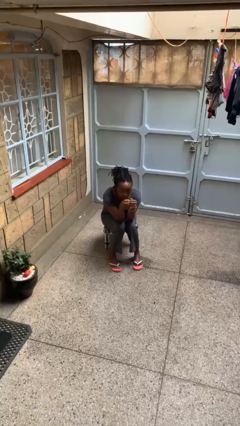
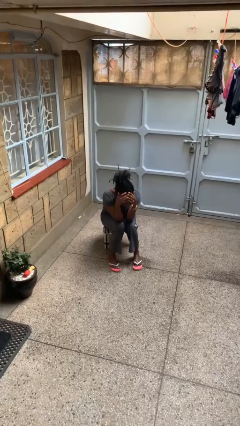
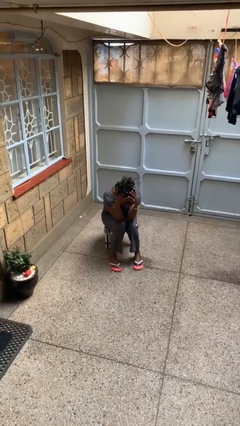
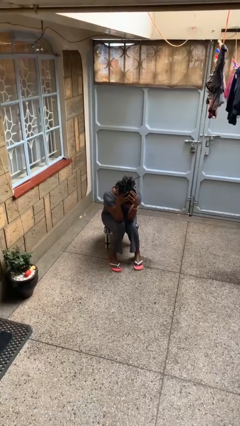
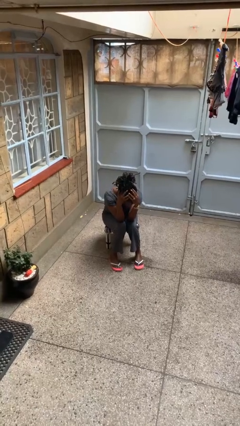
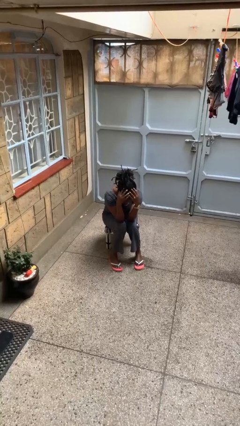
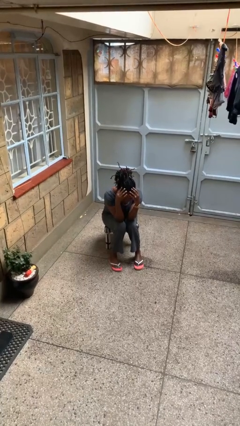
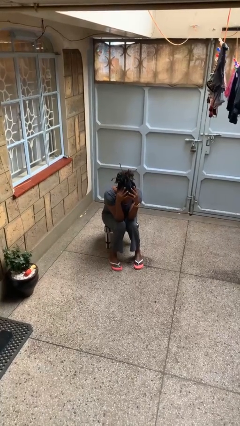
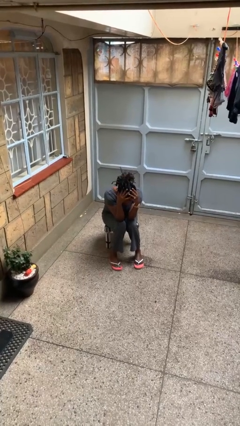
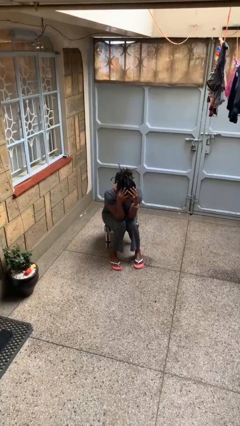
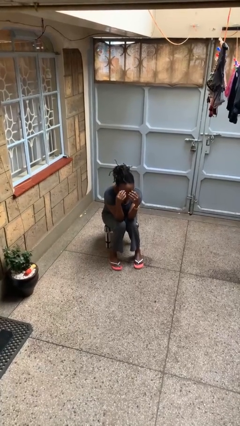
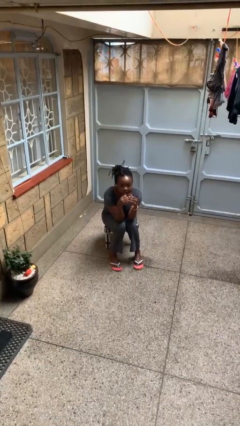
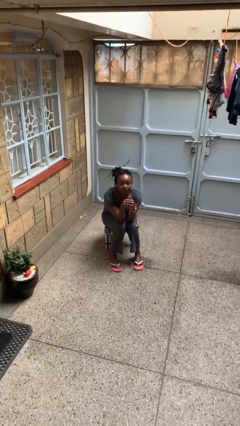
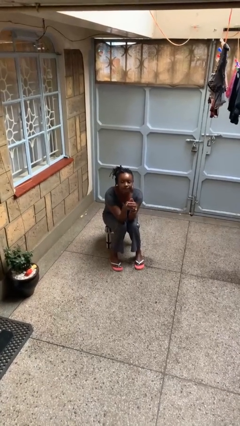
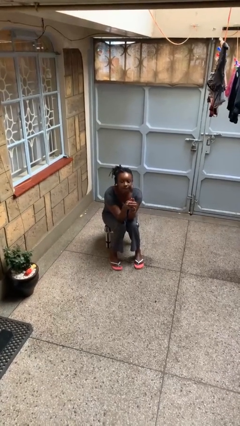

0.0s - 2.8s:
person strokes hair

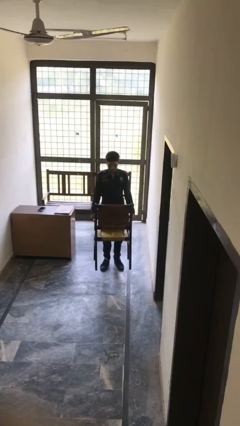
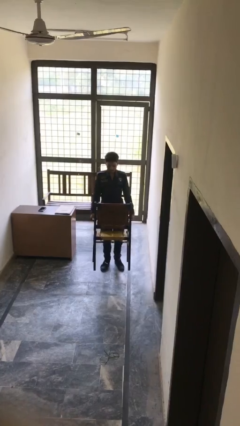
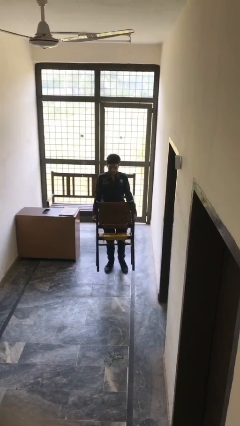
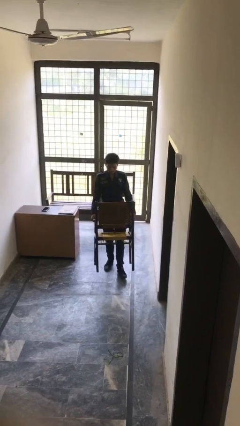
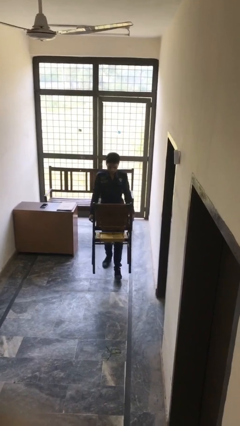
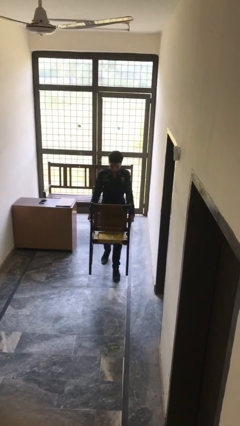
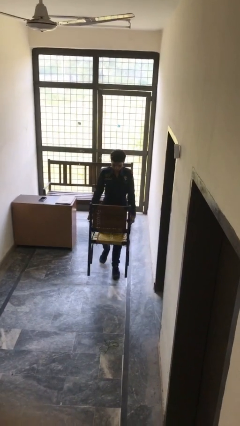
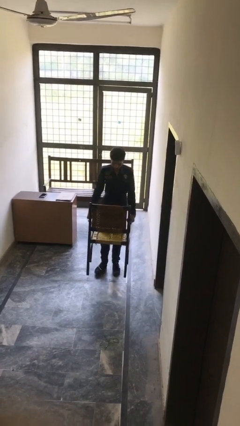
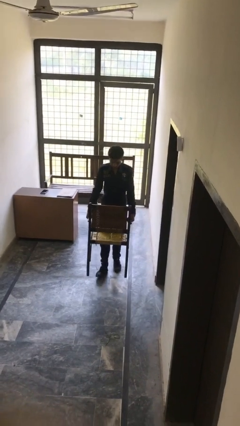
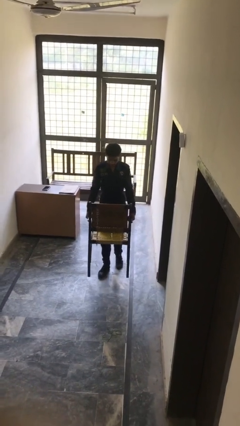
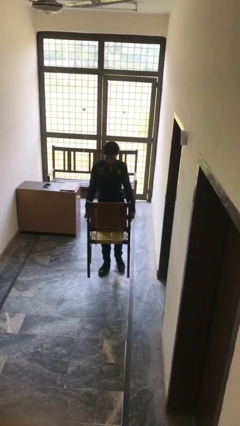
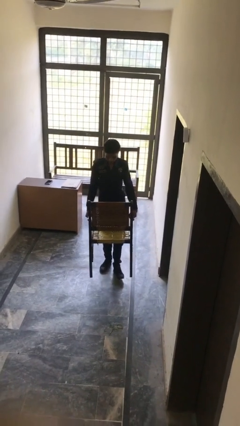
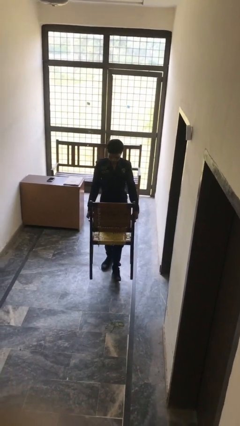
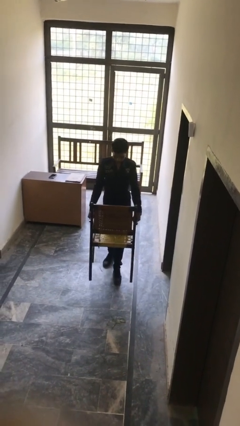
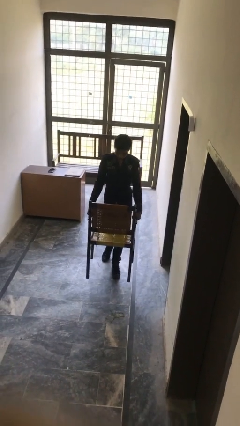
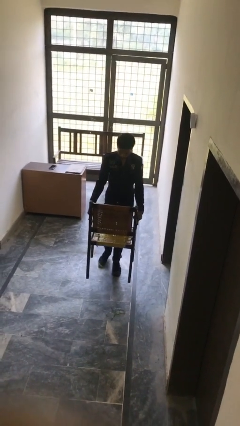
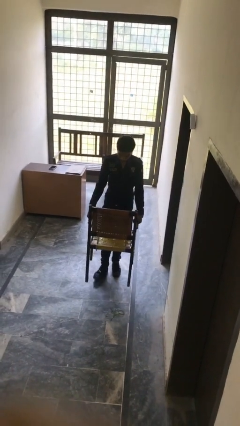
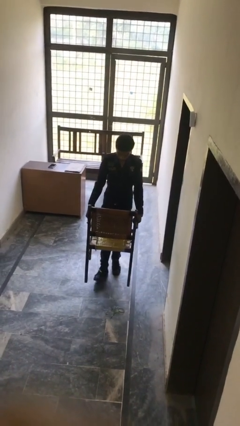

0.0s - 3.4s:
person carries heavy object

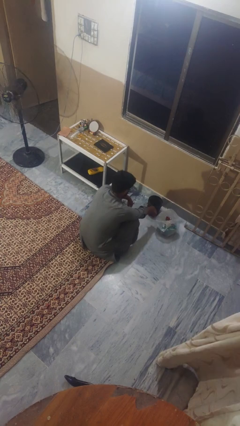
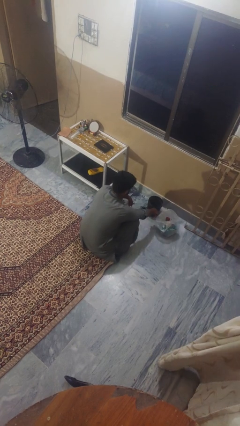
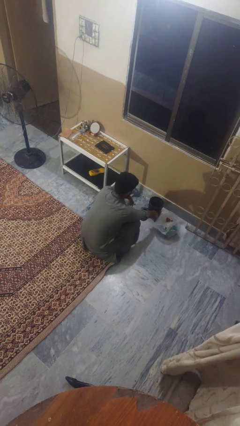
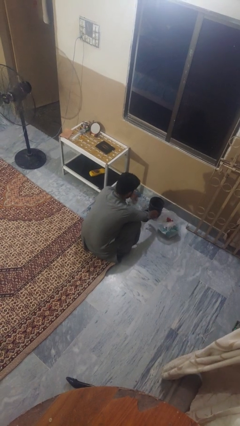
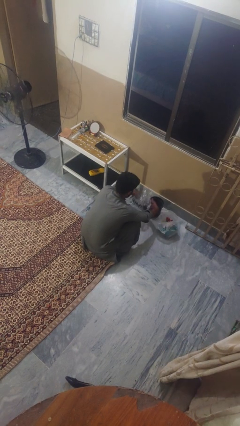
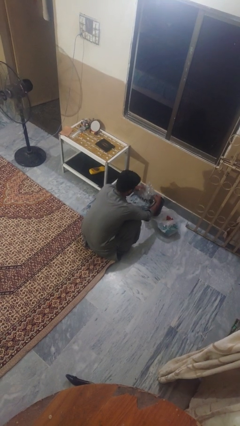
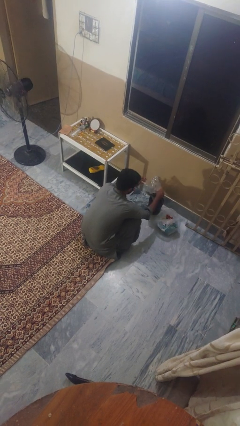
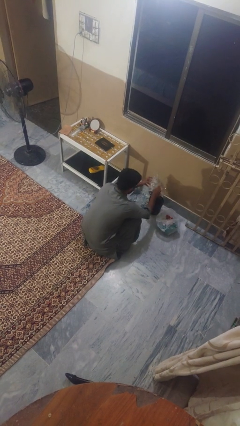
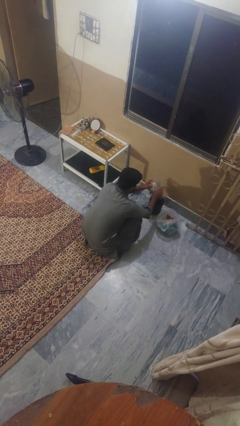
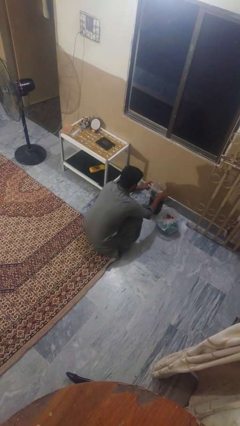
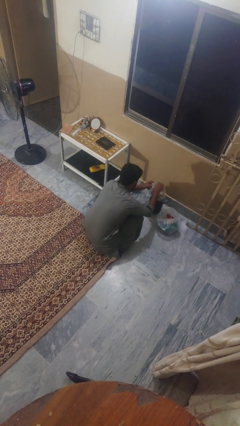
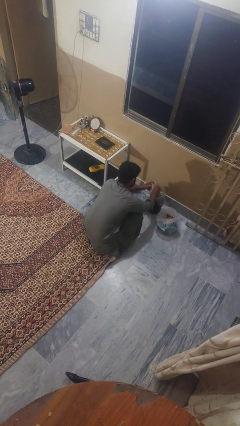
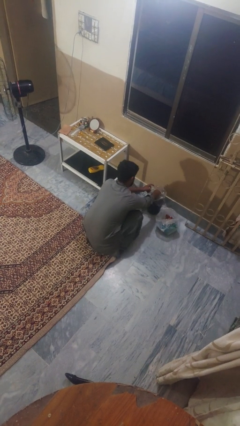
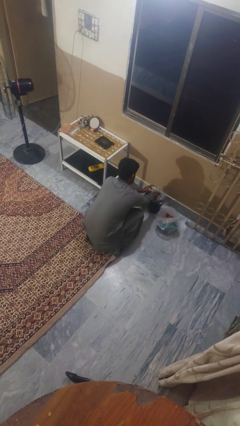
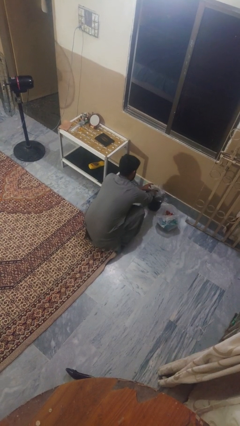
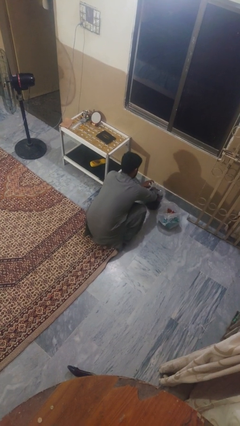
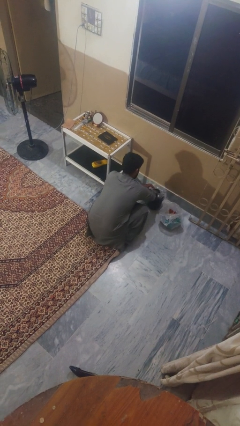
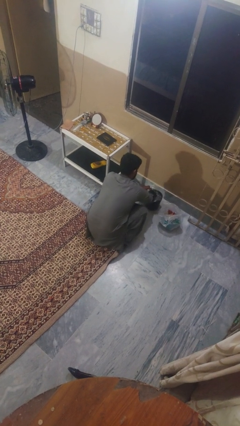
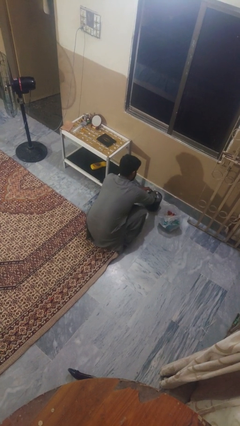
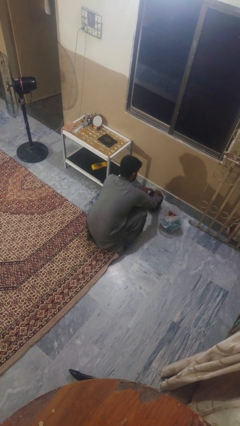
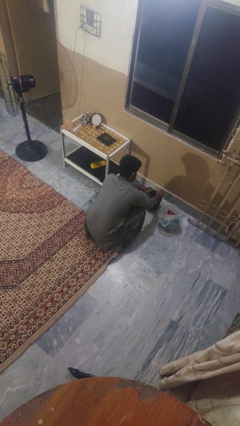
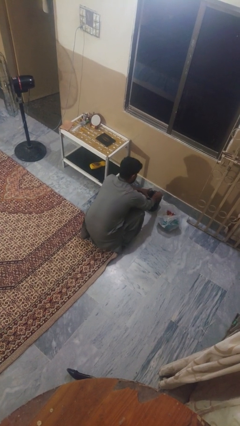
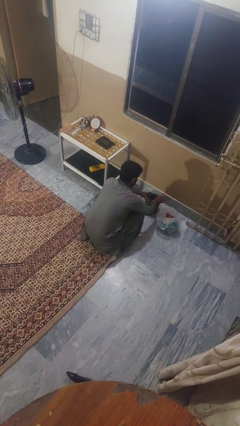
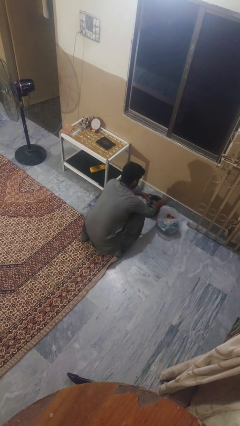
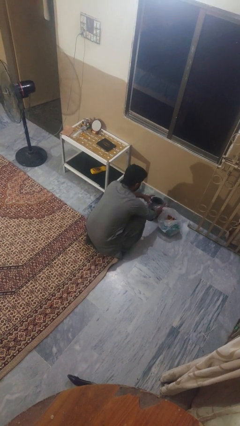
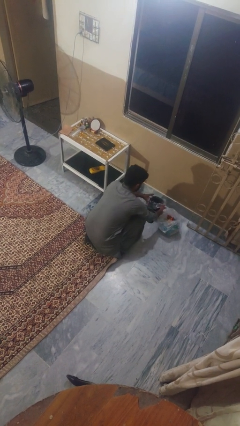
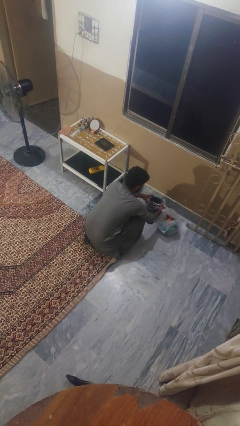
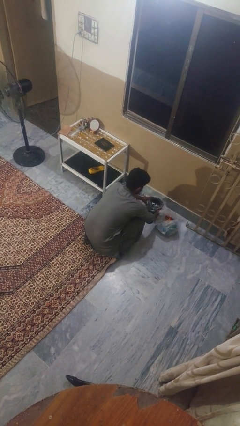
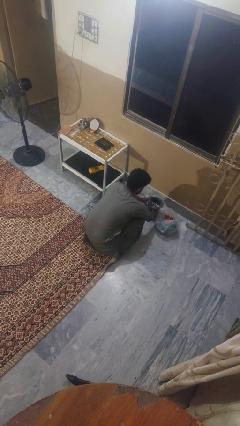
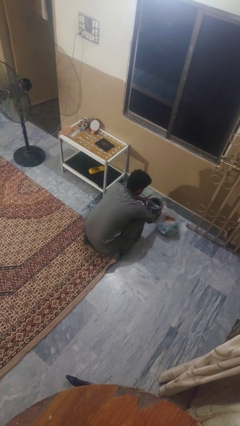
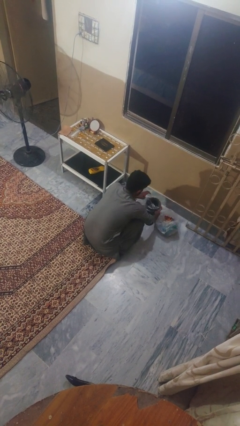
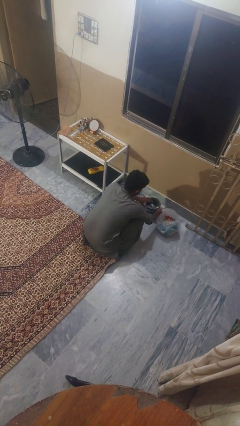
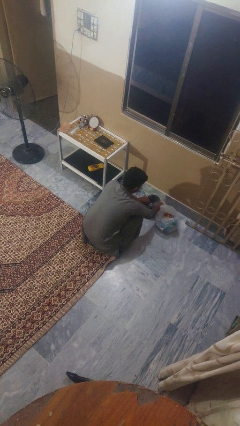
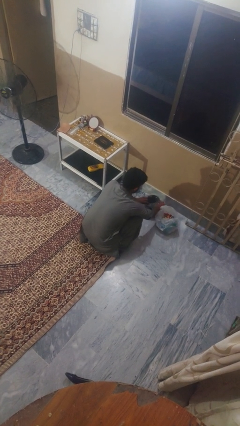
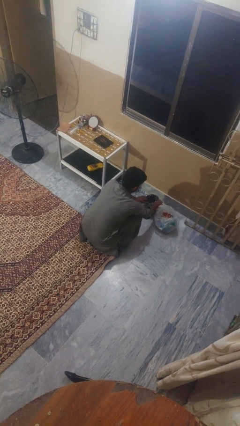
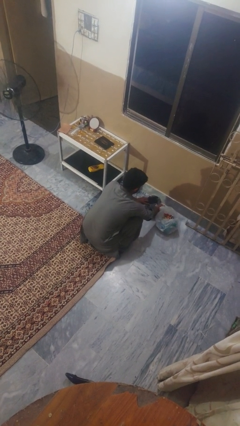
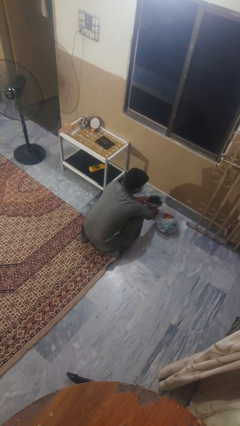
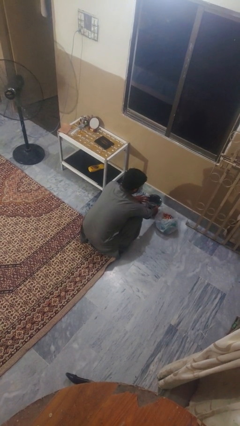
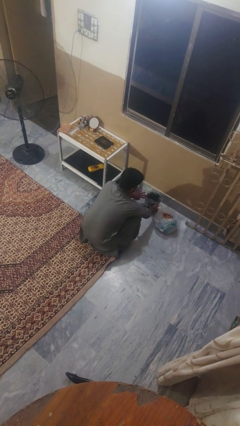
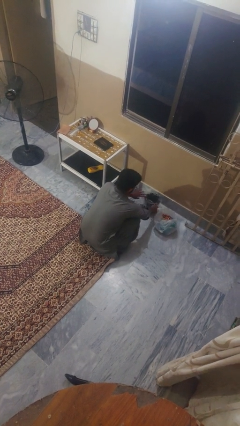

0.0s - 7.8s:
person inserts trashbag into trashcan

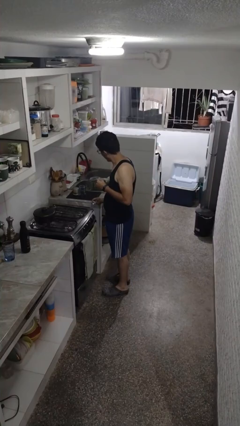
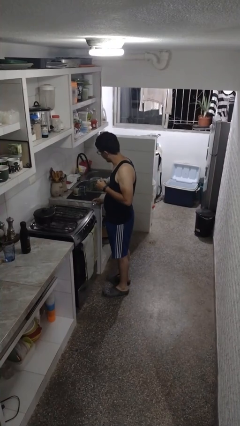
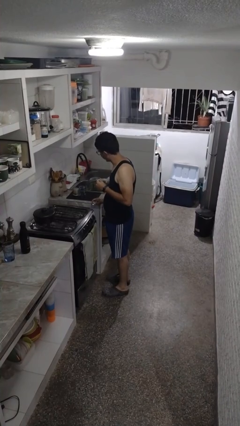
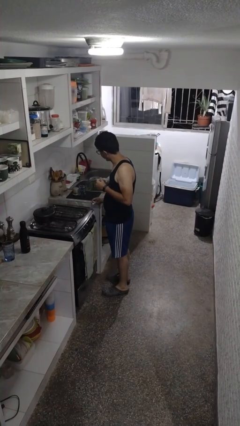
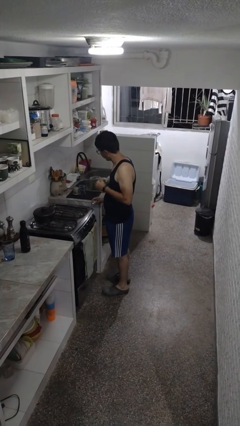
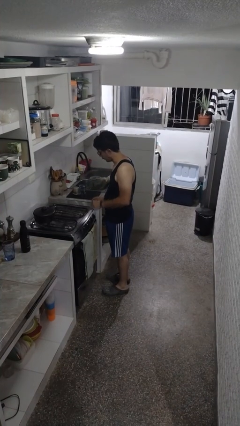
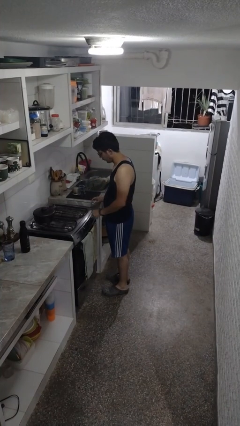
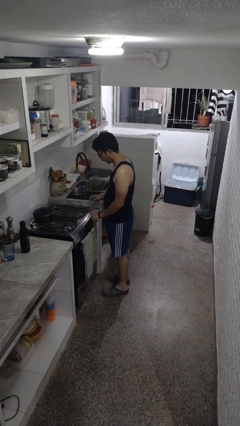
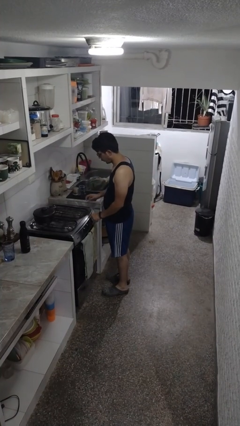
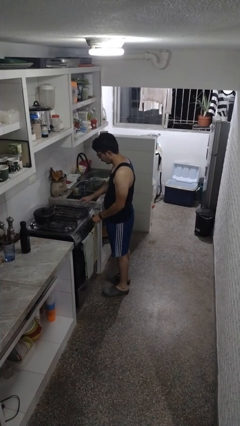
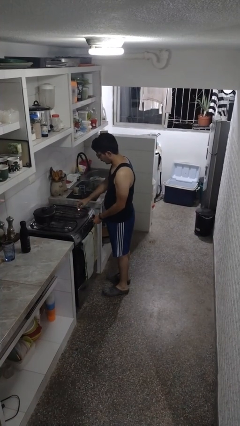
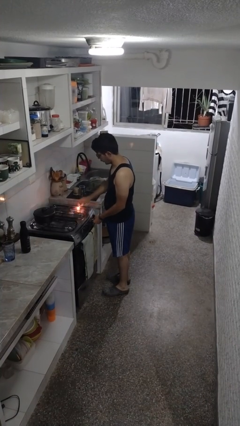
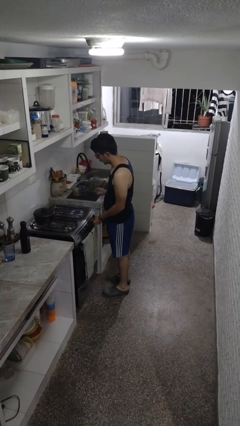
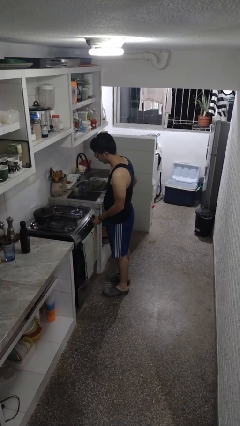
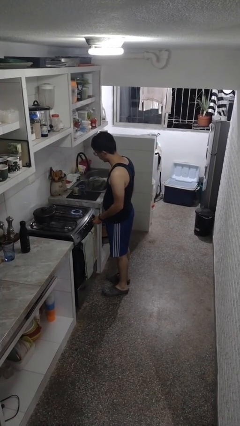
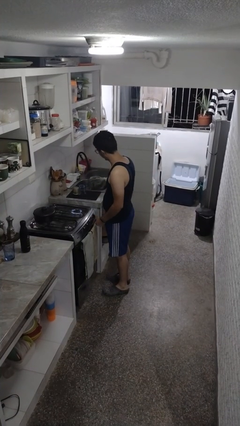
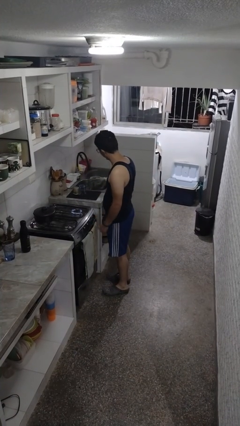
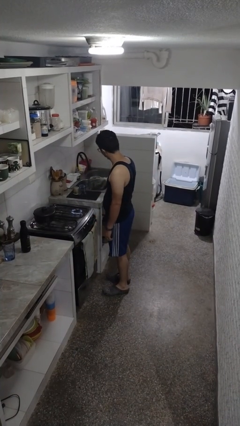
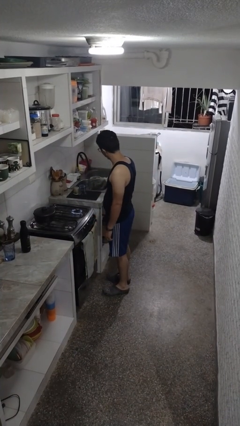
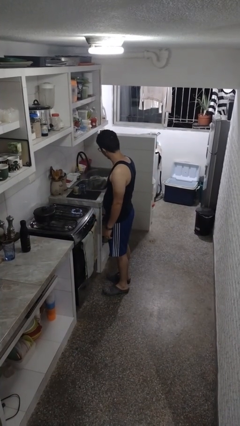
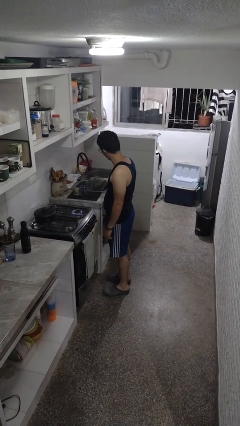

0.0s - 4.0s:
person turns on stovetop
